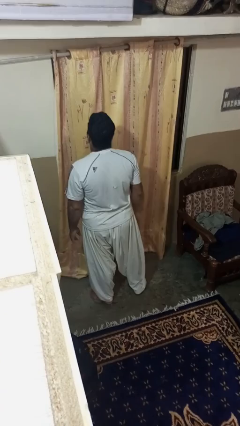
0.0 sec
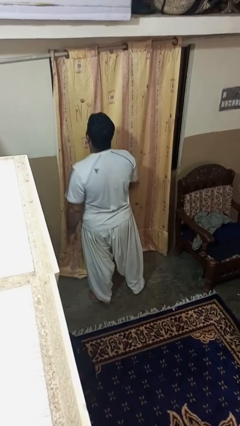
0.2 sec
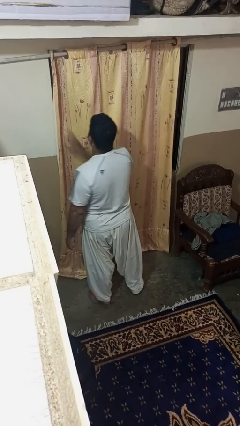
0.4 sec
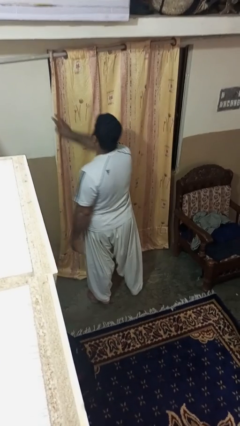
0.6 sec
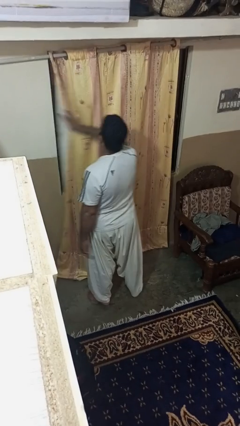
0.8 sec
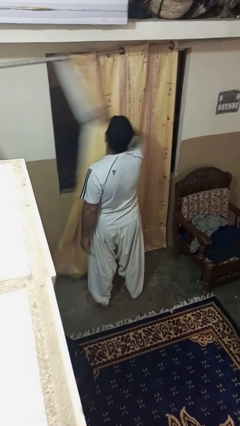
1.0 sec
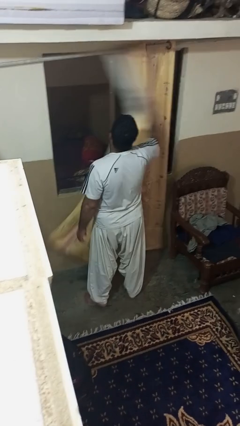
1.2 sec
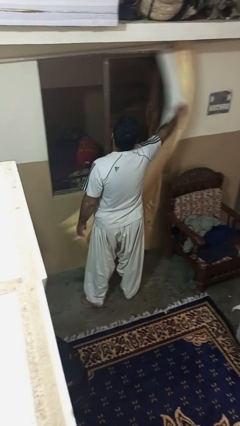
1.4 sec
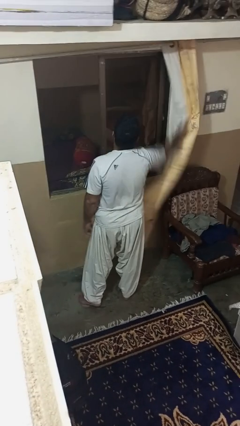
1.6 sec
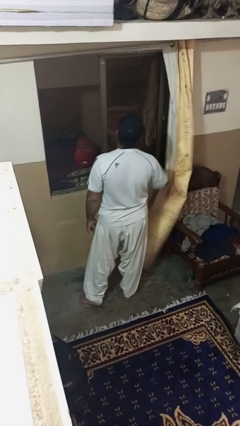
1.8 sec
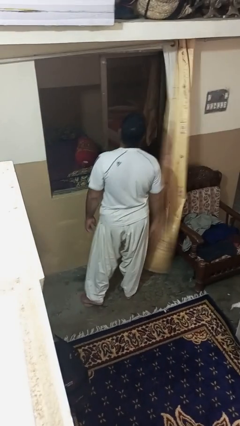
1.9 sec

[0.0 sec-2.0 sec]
person opens curtains

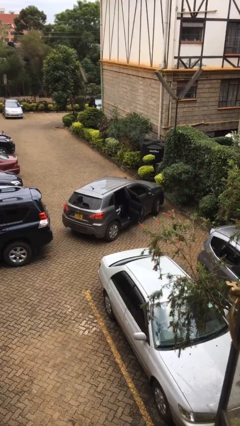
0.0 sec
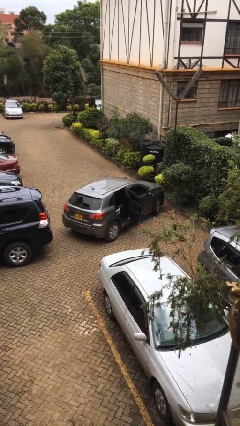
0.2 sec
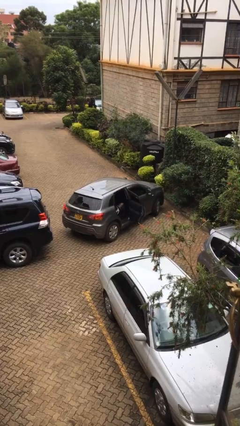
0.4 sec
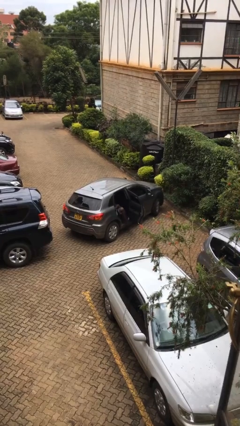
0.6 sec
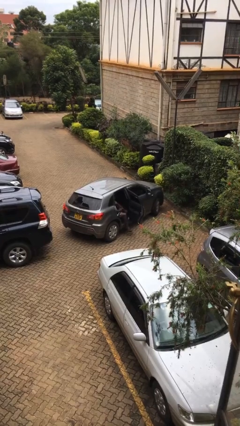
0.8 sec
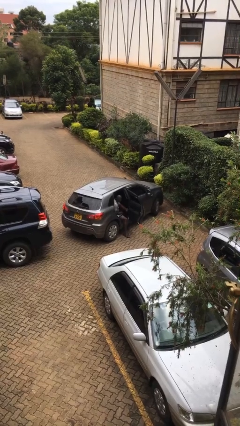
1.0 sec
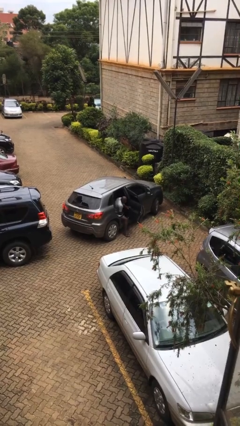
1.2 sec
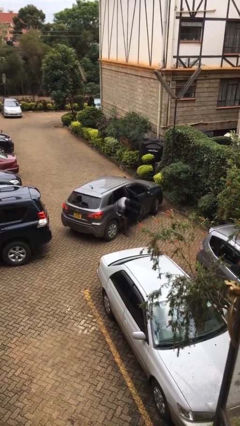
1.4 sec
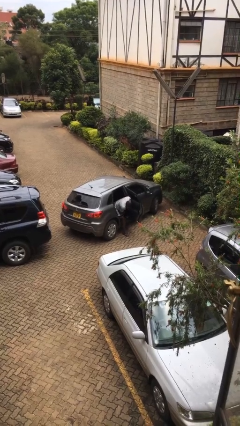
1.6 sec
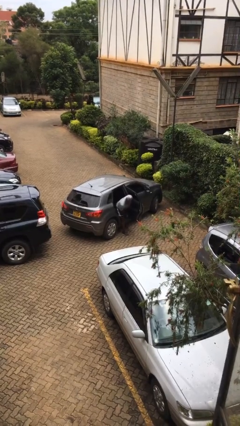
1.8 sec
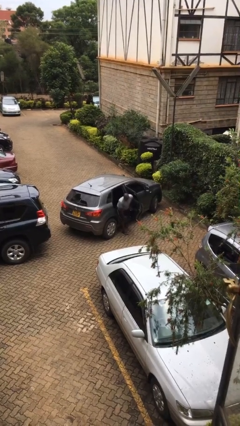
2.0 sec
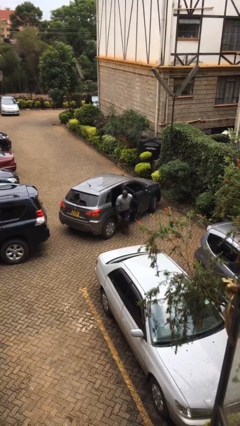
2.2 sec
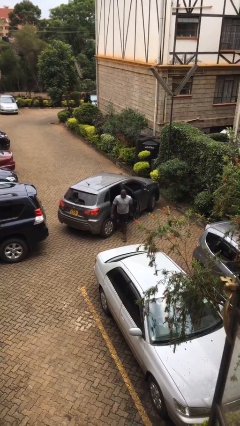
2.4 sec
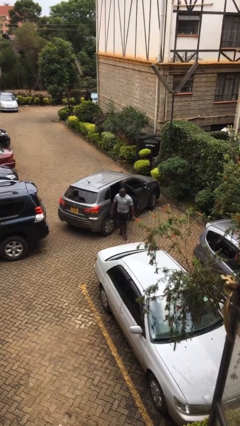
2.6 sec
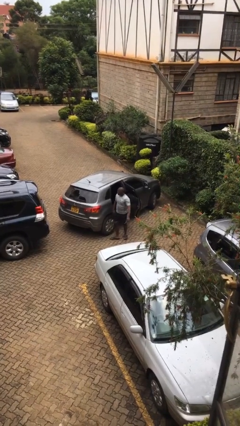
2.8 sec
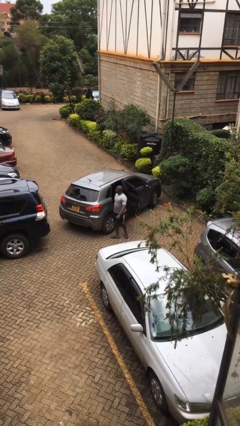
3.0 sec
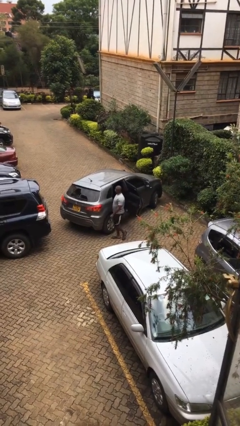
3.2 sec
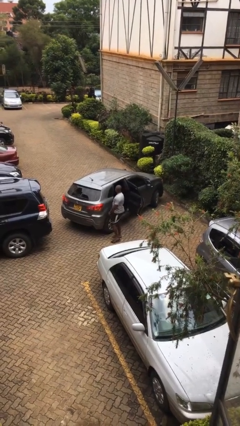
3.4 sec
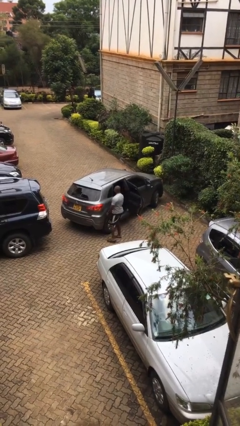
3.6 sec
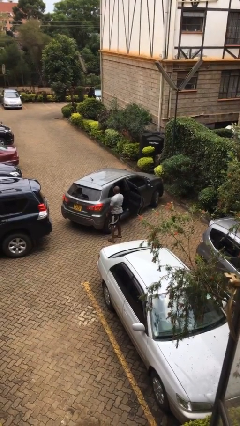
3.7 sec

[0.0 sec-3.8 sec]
person exits car

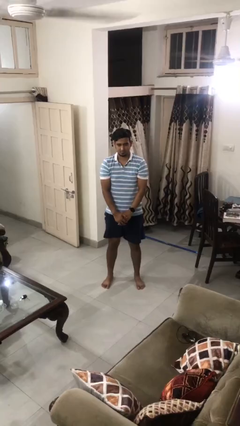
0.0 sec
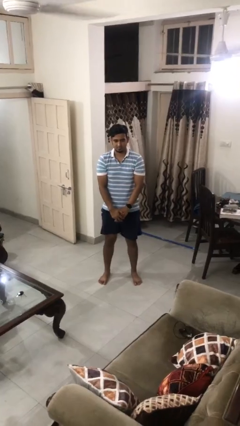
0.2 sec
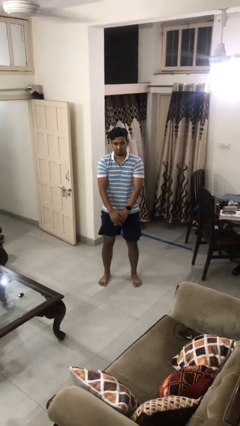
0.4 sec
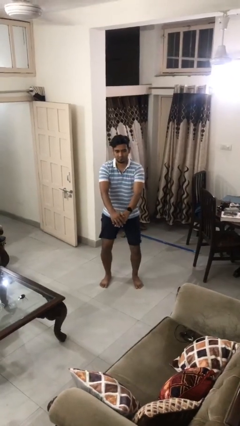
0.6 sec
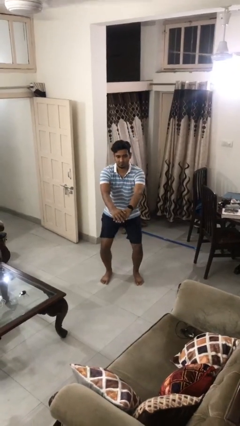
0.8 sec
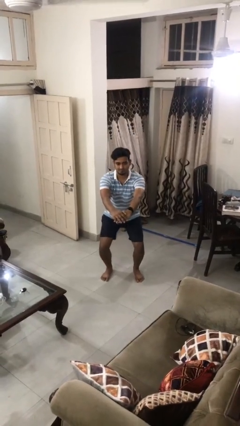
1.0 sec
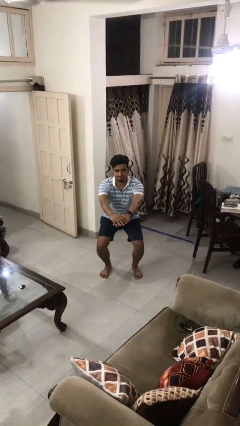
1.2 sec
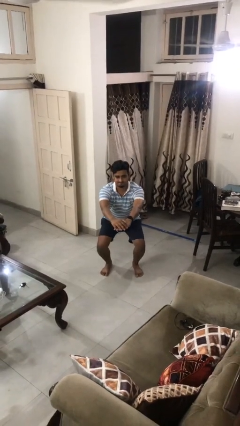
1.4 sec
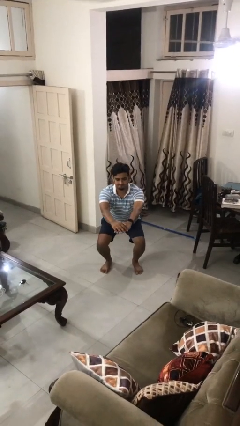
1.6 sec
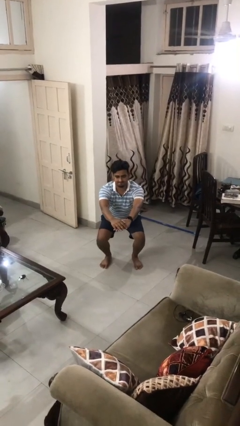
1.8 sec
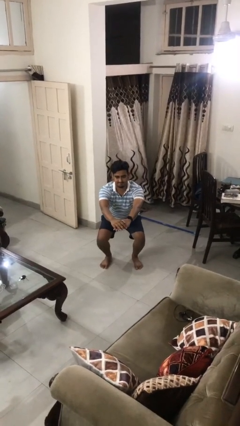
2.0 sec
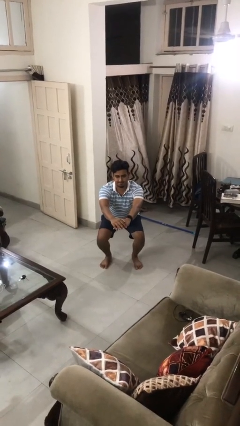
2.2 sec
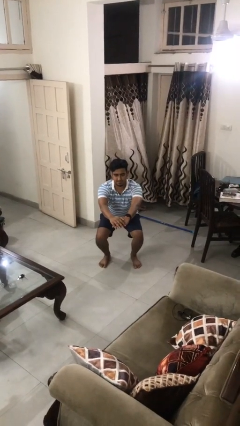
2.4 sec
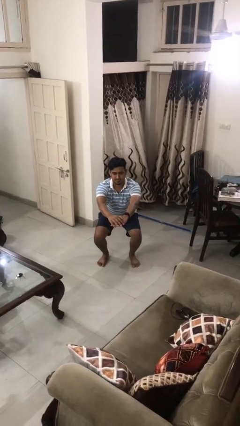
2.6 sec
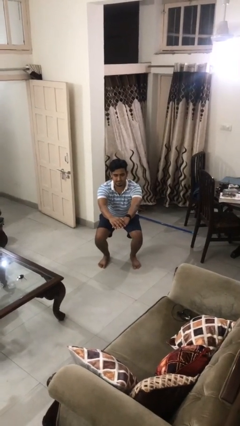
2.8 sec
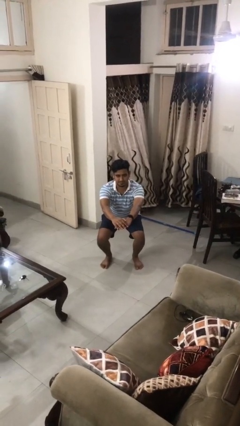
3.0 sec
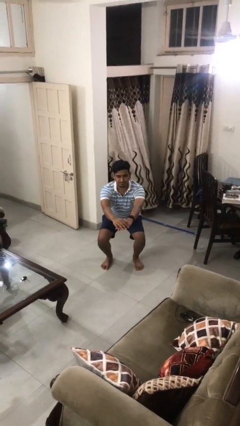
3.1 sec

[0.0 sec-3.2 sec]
person squats

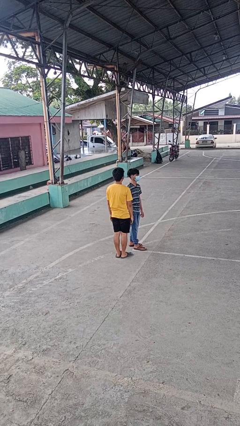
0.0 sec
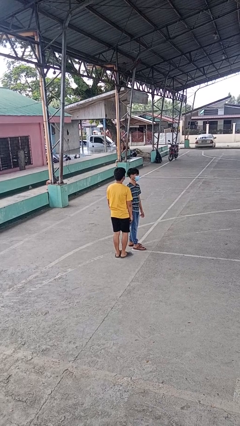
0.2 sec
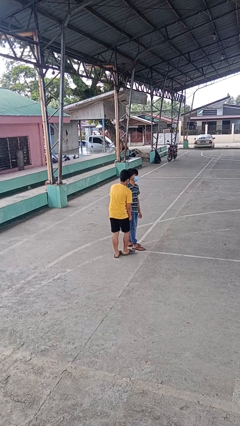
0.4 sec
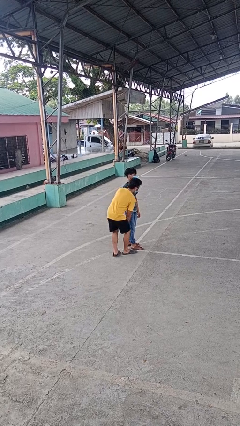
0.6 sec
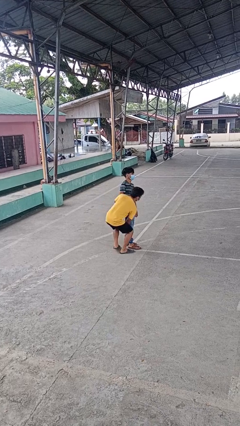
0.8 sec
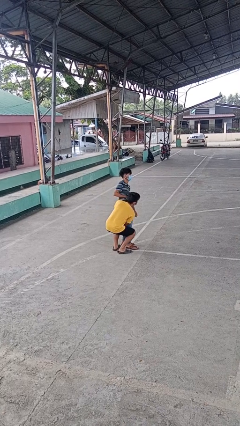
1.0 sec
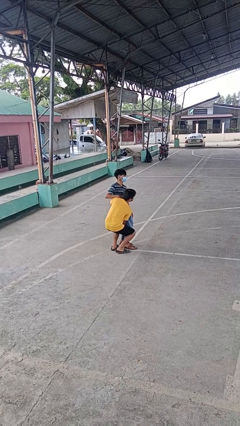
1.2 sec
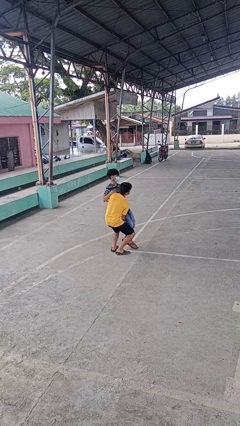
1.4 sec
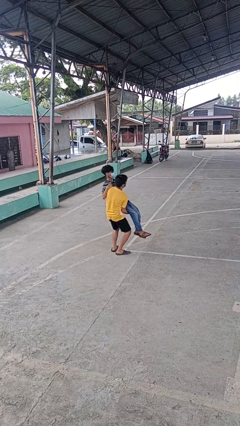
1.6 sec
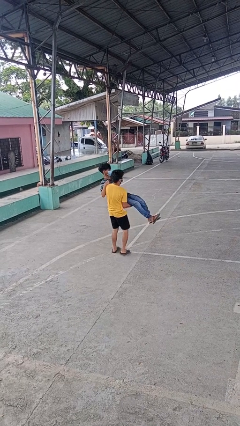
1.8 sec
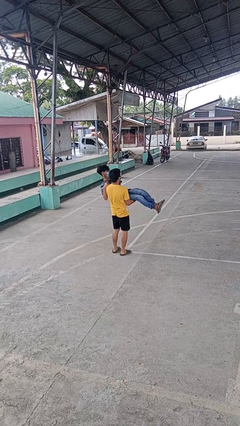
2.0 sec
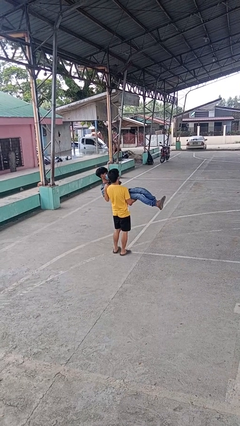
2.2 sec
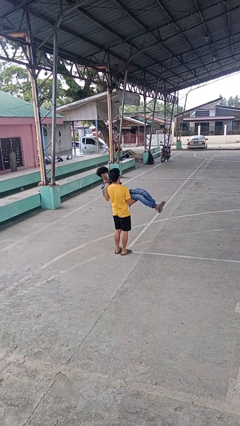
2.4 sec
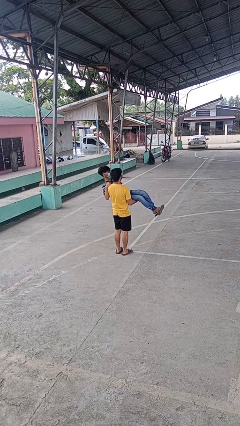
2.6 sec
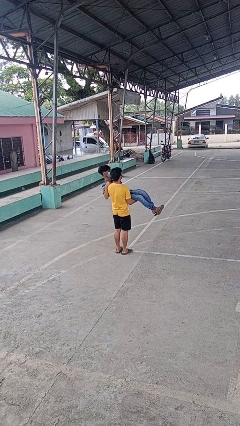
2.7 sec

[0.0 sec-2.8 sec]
person picks up person

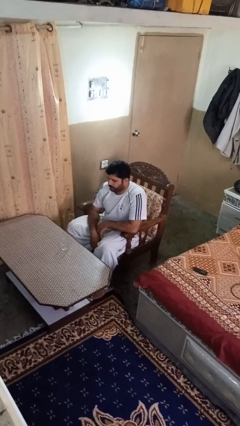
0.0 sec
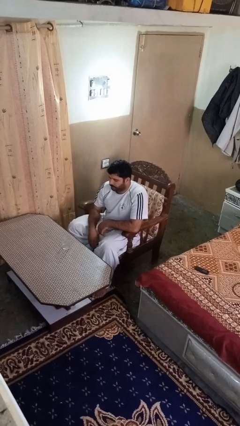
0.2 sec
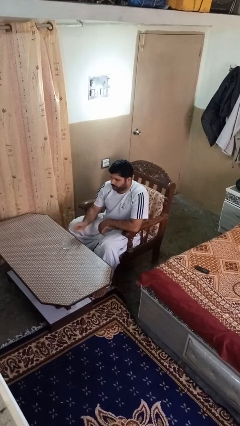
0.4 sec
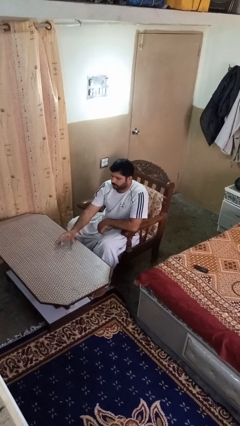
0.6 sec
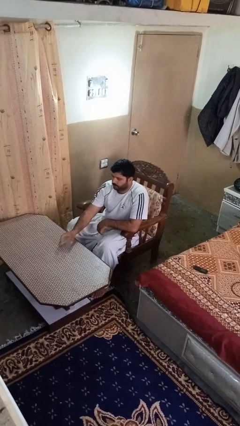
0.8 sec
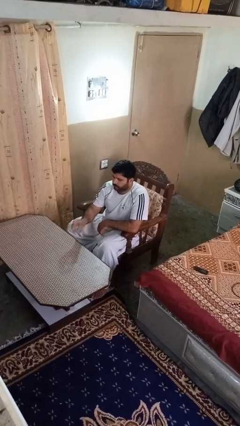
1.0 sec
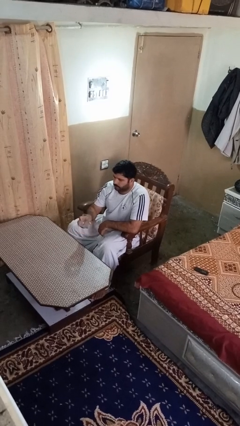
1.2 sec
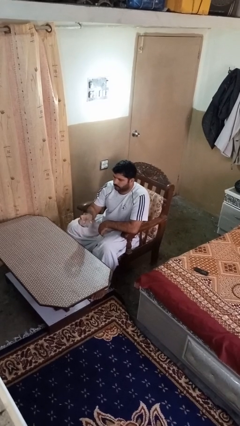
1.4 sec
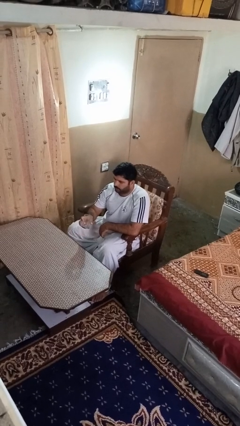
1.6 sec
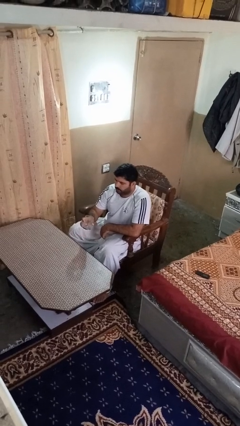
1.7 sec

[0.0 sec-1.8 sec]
person picks up object from table

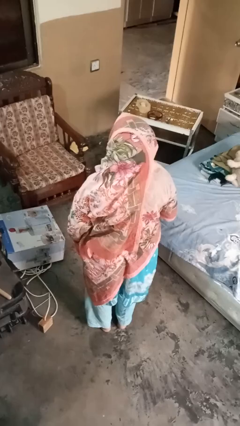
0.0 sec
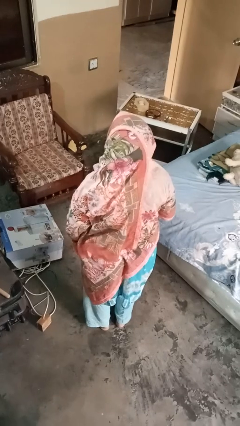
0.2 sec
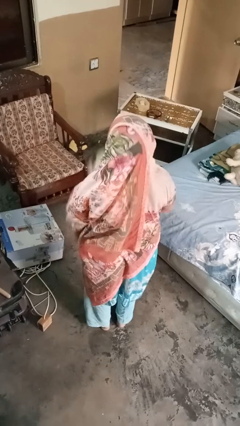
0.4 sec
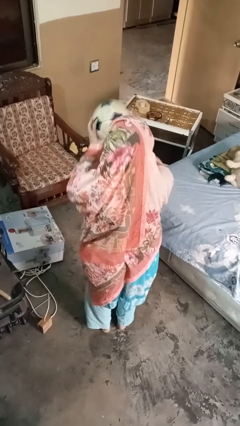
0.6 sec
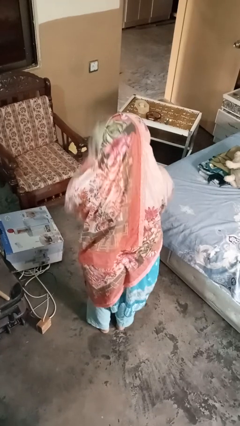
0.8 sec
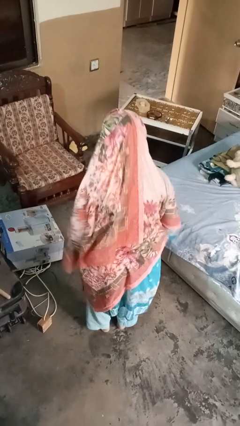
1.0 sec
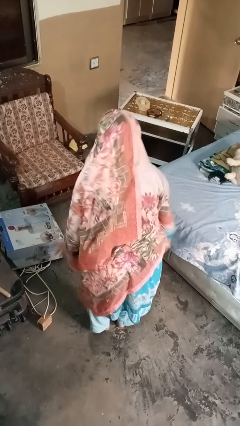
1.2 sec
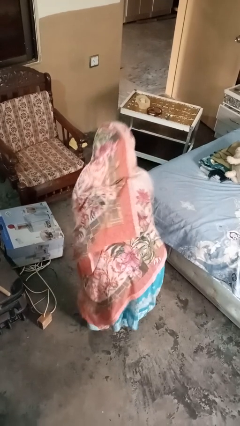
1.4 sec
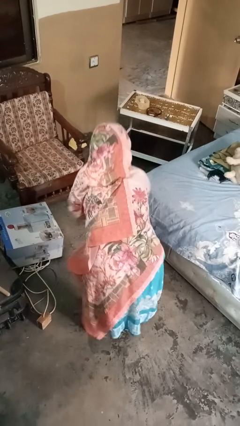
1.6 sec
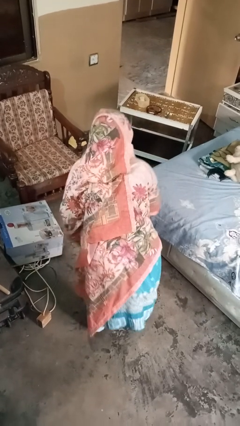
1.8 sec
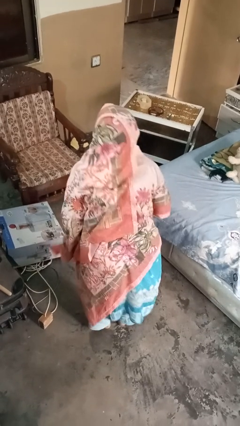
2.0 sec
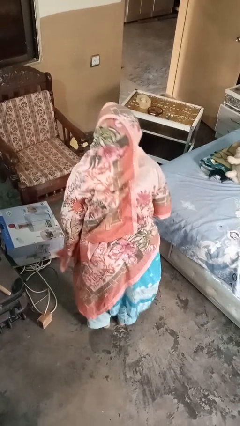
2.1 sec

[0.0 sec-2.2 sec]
person bounces ball on floor

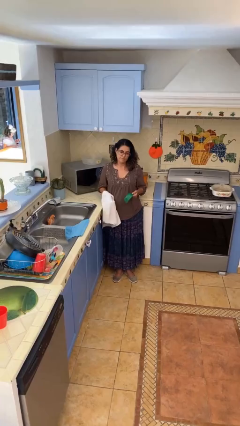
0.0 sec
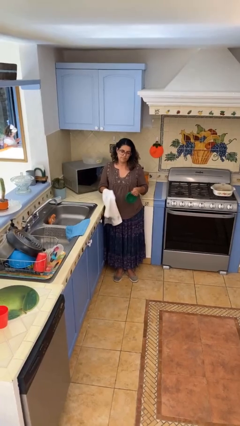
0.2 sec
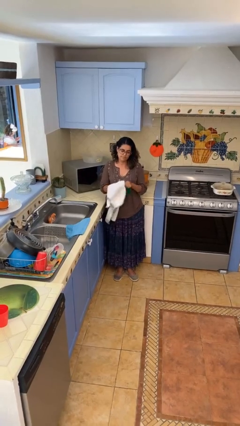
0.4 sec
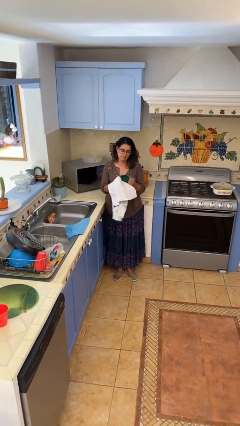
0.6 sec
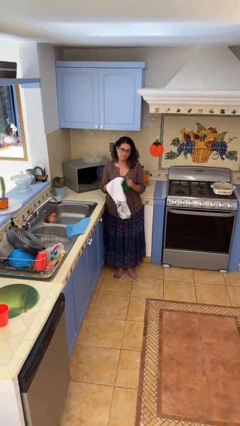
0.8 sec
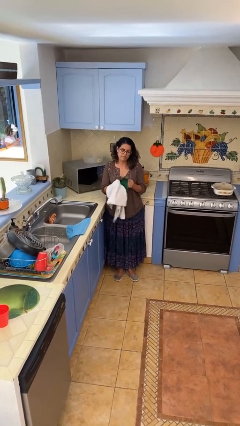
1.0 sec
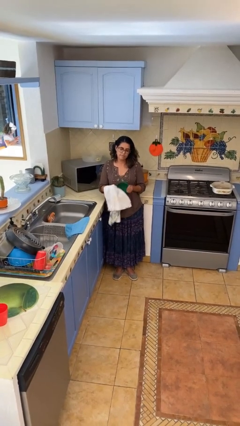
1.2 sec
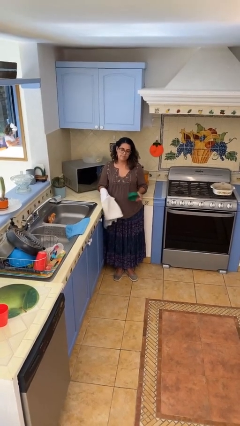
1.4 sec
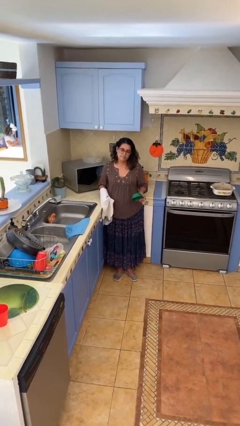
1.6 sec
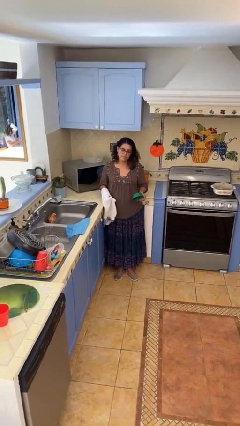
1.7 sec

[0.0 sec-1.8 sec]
person dries dish
